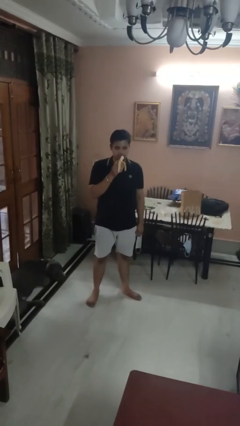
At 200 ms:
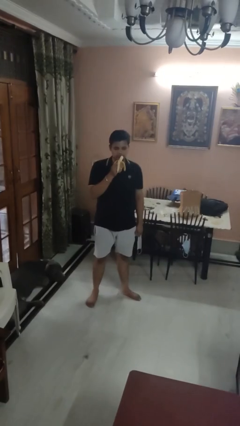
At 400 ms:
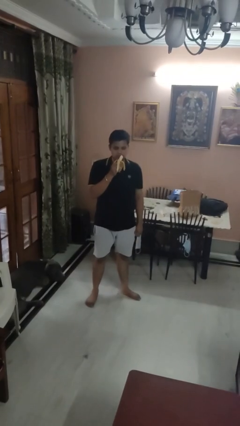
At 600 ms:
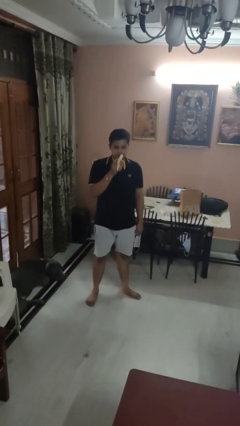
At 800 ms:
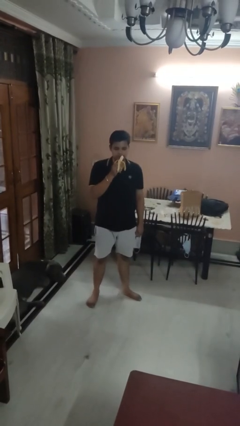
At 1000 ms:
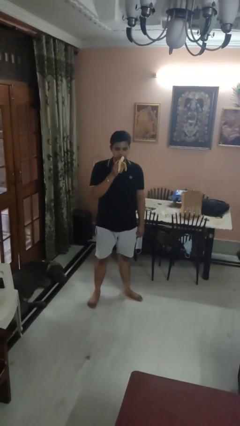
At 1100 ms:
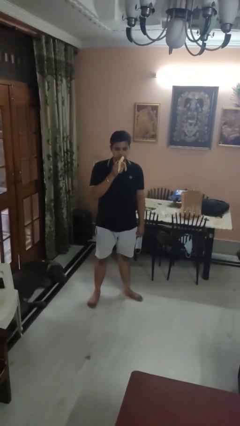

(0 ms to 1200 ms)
person eats banana

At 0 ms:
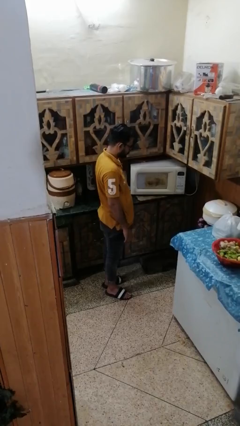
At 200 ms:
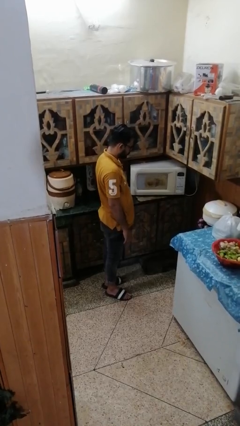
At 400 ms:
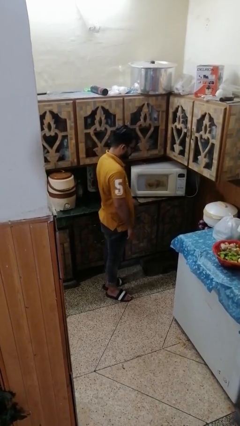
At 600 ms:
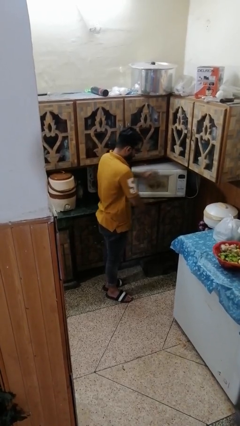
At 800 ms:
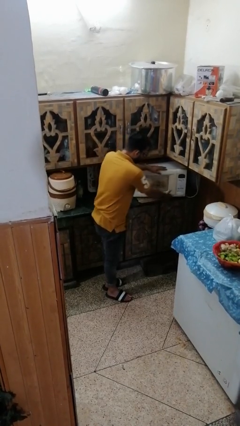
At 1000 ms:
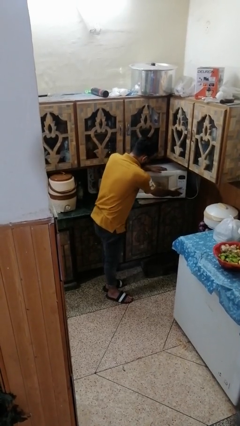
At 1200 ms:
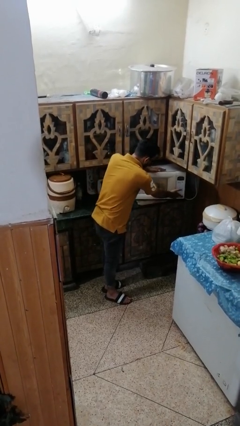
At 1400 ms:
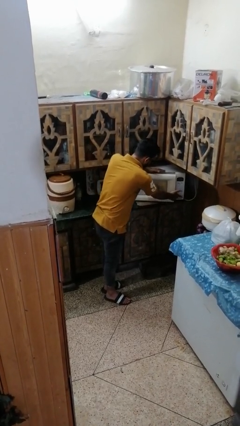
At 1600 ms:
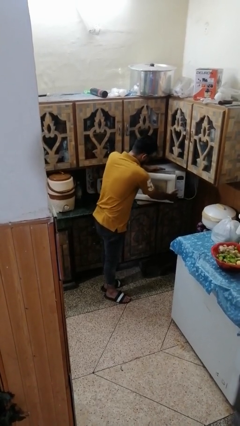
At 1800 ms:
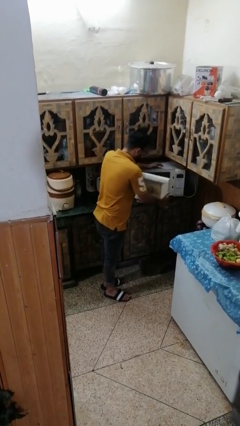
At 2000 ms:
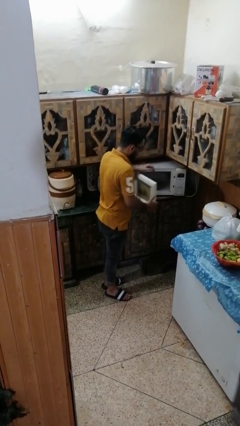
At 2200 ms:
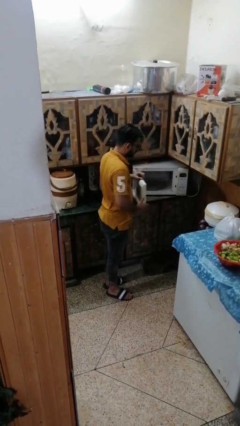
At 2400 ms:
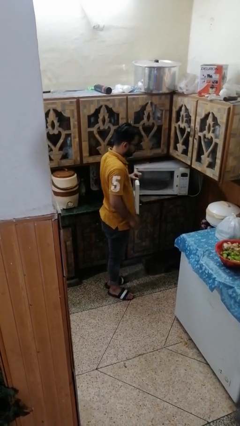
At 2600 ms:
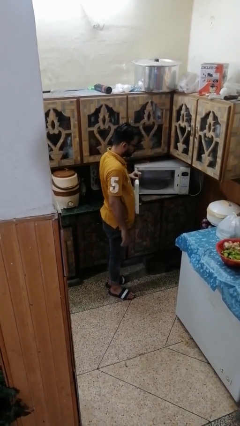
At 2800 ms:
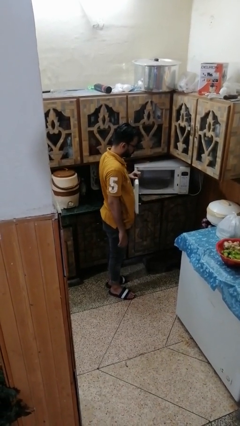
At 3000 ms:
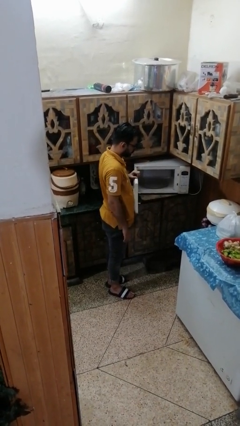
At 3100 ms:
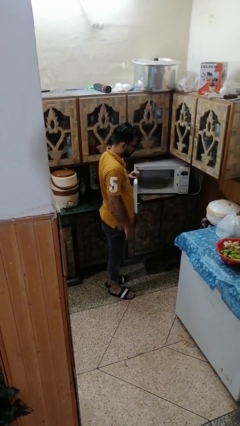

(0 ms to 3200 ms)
person opens microwave

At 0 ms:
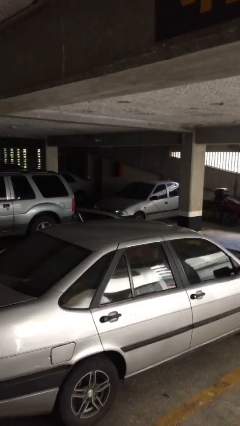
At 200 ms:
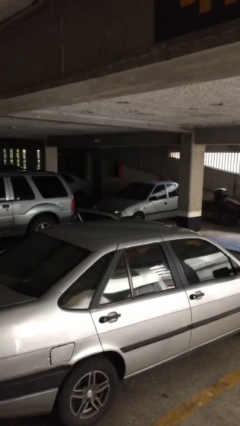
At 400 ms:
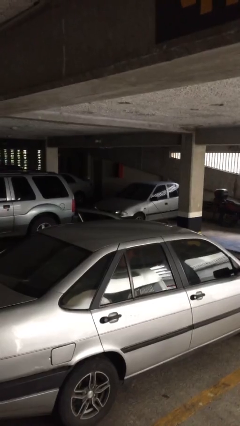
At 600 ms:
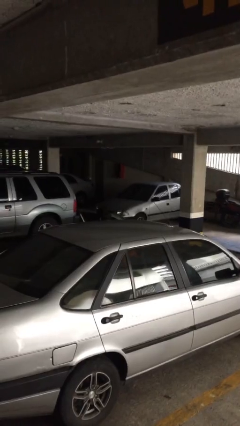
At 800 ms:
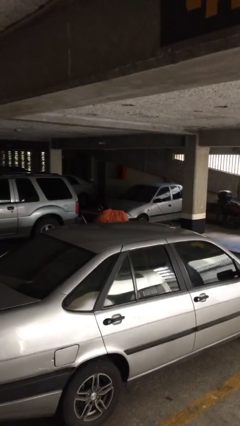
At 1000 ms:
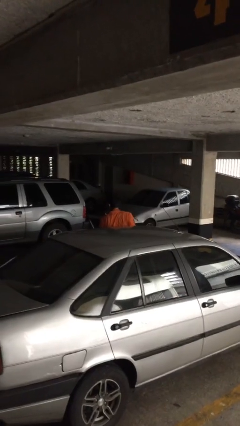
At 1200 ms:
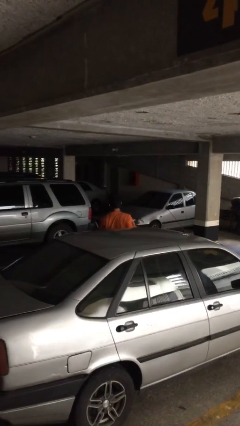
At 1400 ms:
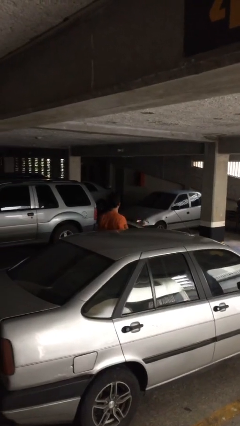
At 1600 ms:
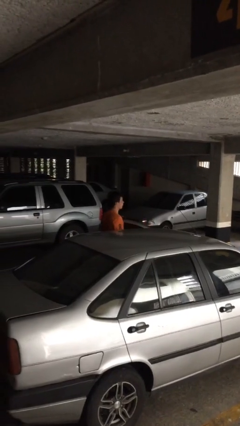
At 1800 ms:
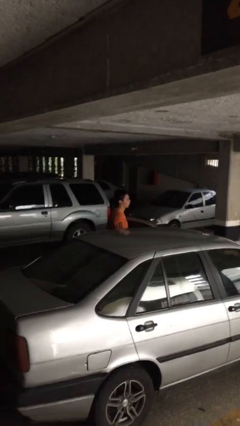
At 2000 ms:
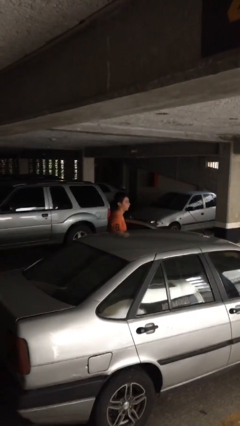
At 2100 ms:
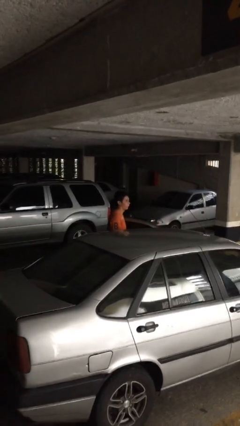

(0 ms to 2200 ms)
person exits car

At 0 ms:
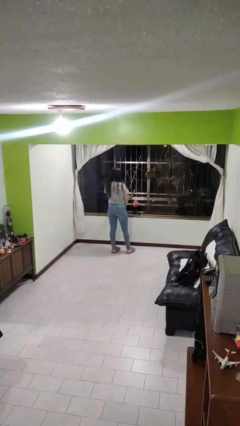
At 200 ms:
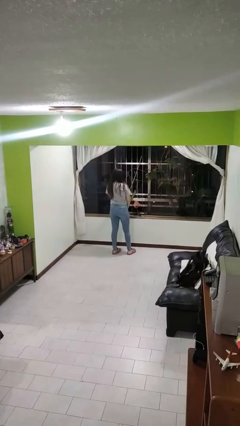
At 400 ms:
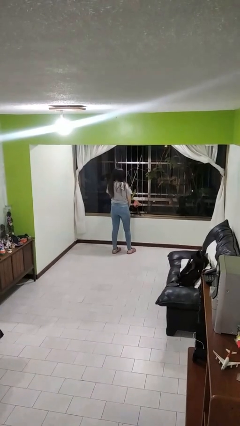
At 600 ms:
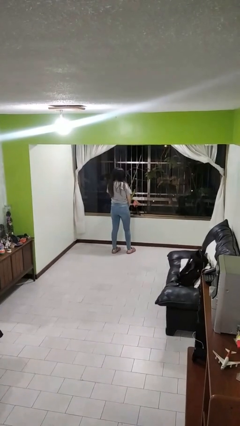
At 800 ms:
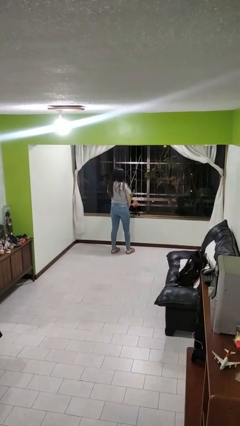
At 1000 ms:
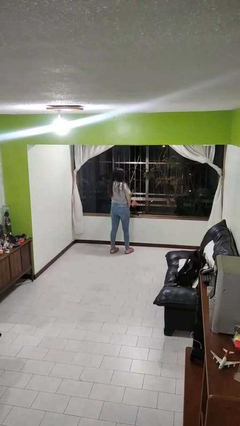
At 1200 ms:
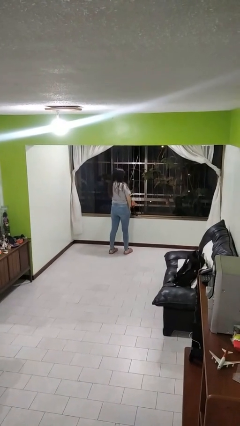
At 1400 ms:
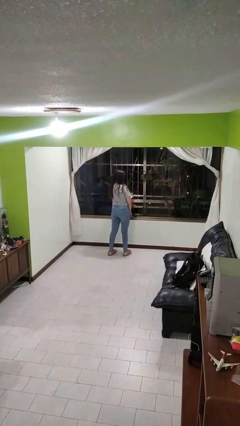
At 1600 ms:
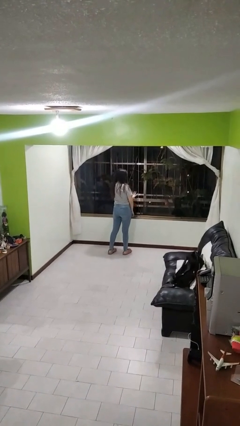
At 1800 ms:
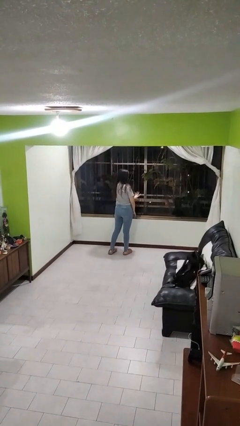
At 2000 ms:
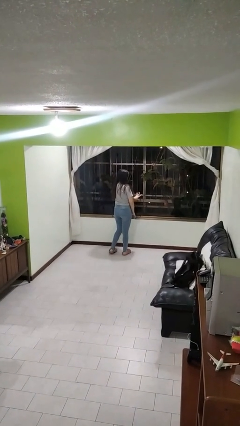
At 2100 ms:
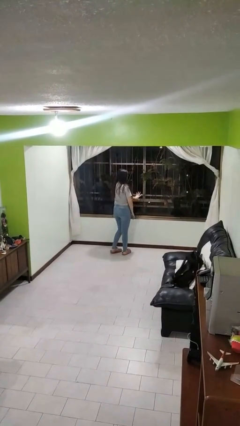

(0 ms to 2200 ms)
person closes home window

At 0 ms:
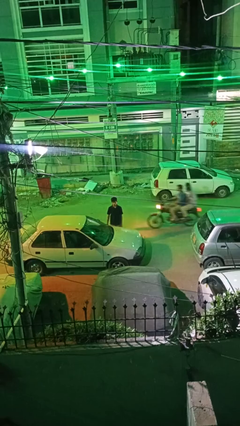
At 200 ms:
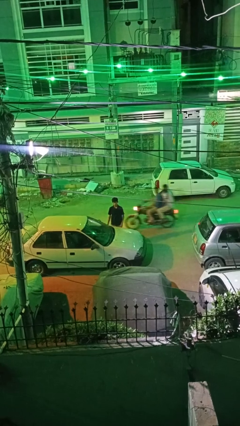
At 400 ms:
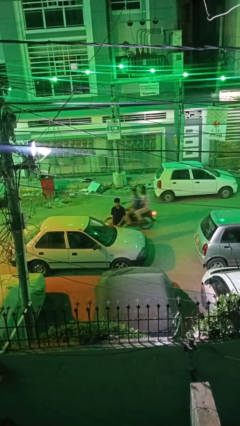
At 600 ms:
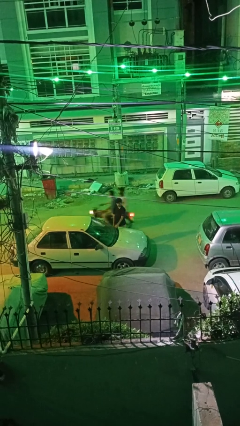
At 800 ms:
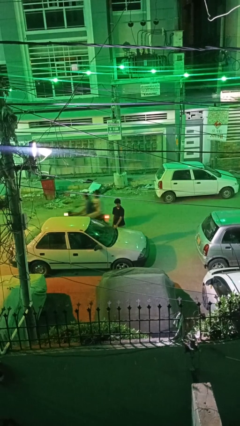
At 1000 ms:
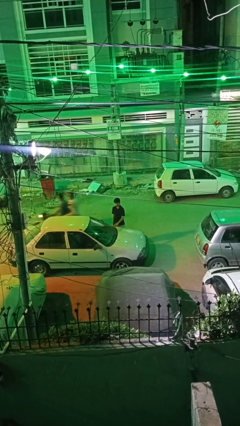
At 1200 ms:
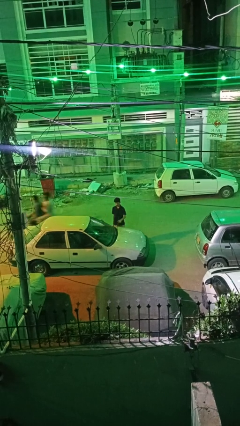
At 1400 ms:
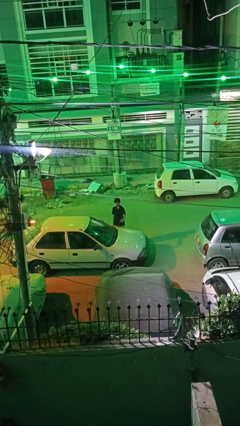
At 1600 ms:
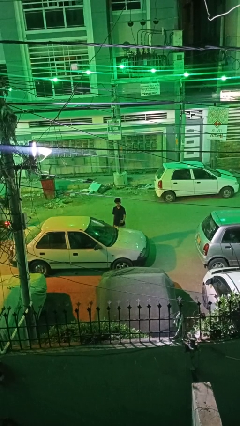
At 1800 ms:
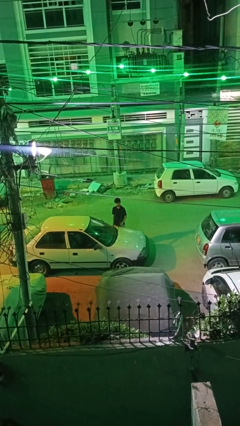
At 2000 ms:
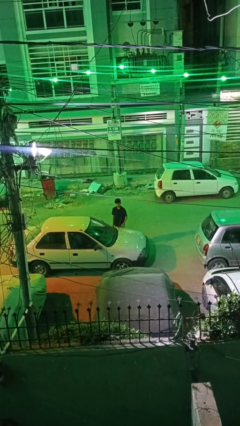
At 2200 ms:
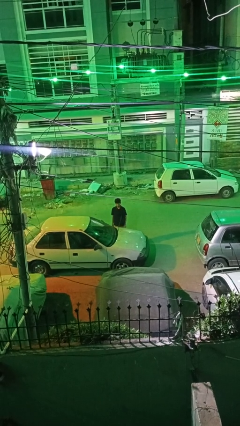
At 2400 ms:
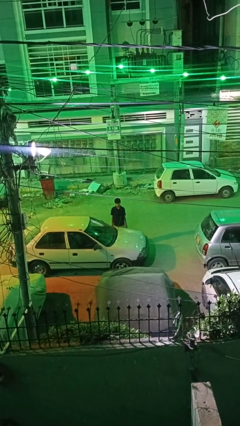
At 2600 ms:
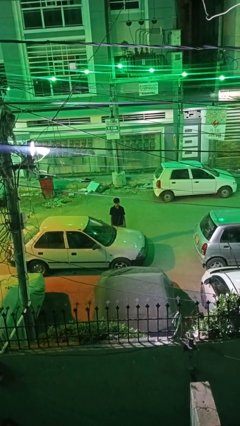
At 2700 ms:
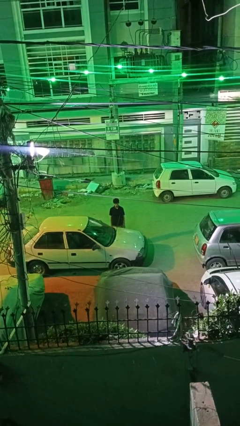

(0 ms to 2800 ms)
person flips up car wipers

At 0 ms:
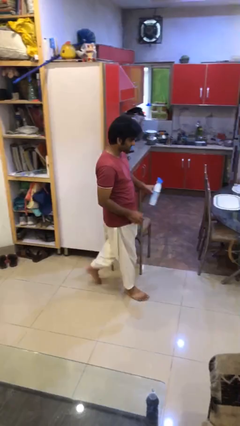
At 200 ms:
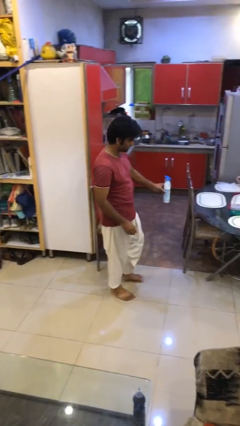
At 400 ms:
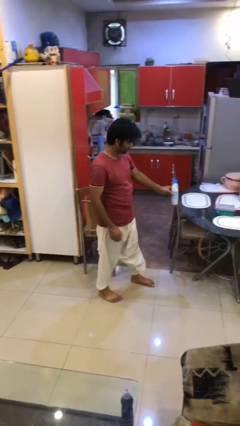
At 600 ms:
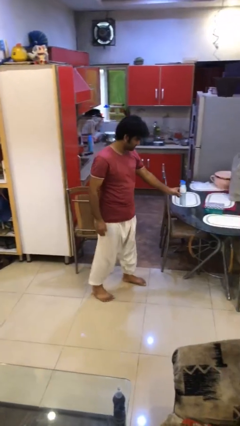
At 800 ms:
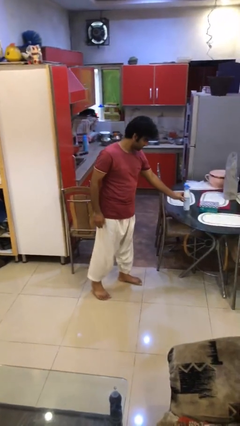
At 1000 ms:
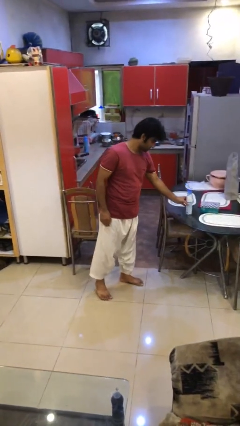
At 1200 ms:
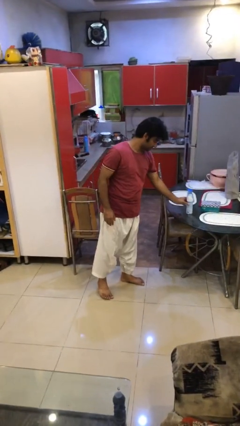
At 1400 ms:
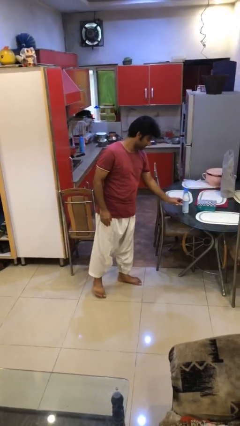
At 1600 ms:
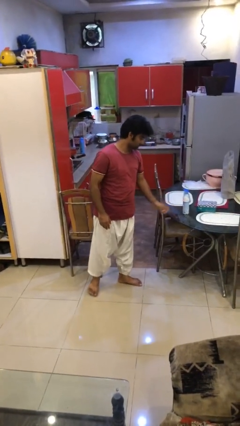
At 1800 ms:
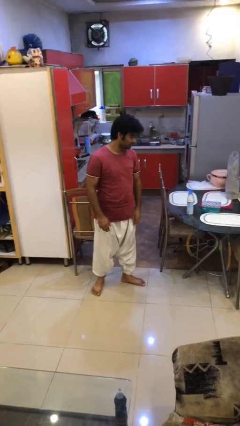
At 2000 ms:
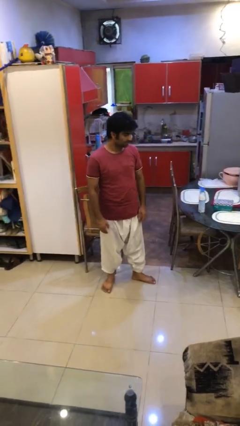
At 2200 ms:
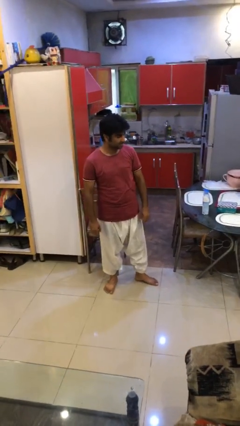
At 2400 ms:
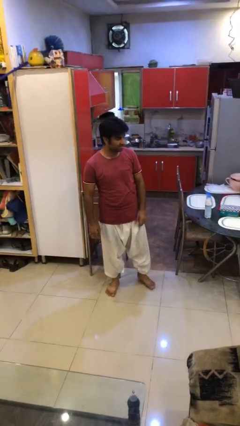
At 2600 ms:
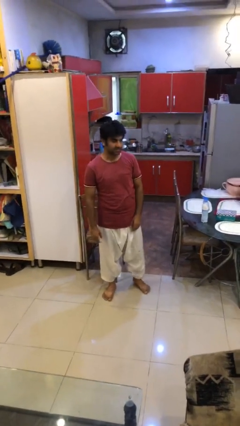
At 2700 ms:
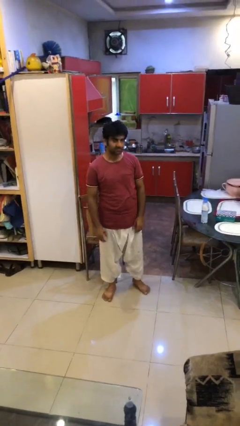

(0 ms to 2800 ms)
person puts down object on table

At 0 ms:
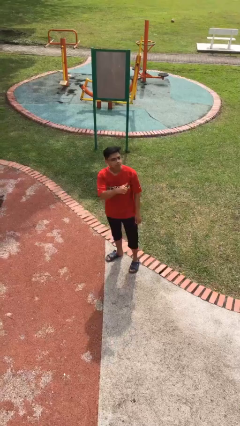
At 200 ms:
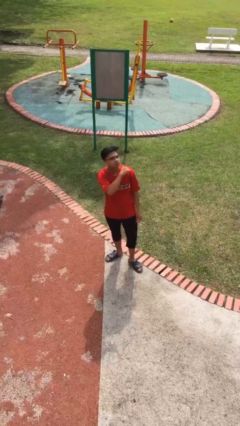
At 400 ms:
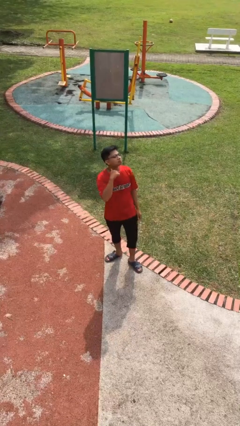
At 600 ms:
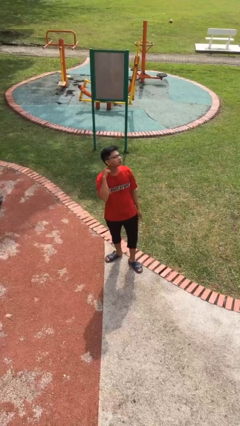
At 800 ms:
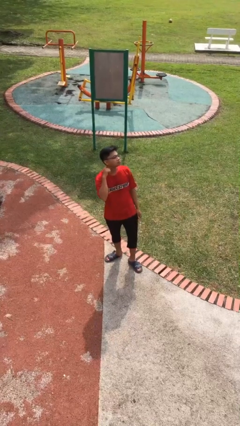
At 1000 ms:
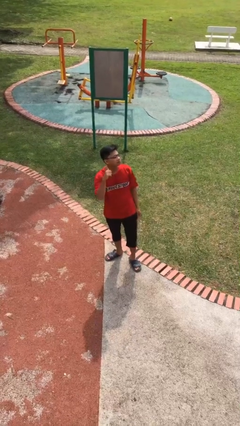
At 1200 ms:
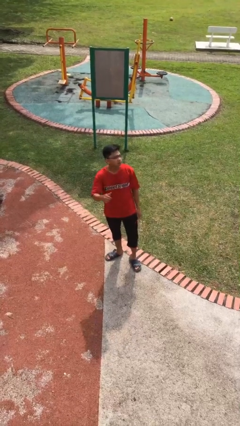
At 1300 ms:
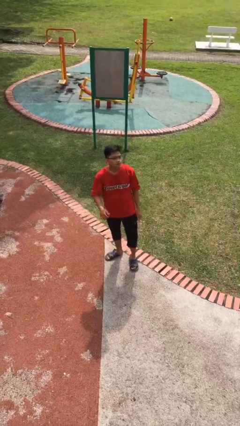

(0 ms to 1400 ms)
person gestures cut

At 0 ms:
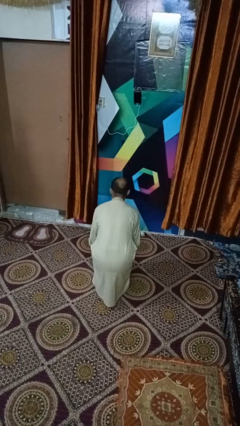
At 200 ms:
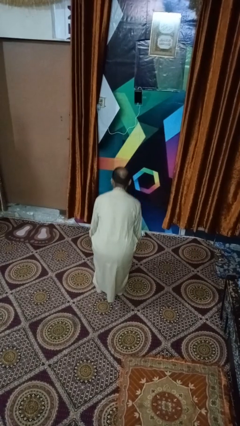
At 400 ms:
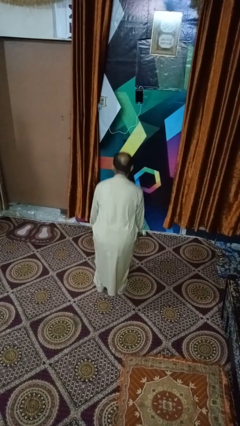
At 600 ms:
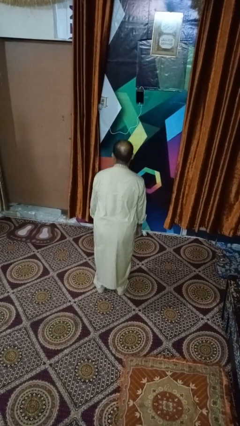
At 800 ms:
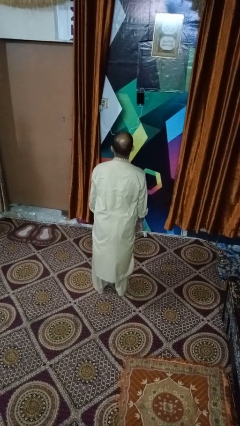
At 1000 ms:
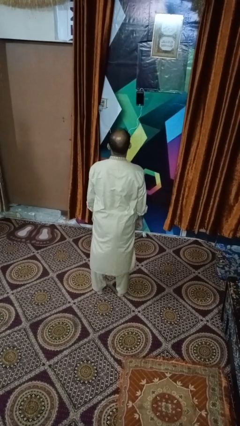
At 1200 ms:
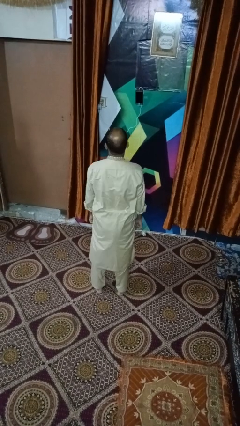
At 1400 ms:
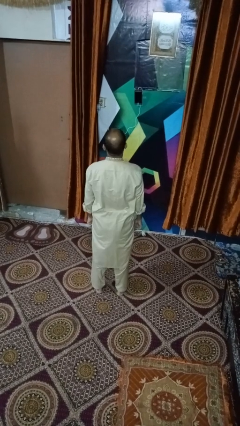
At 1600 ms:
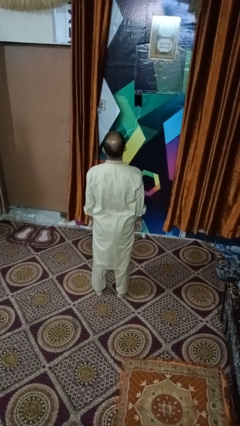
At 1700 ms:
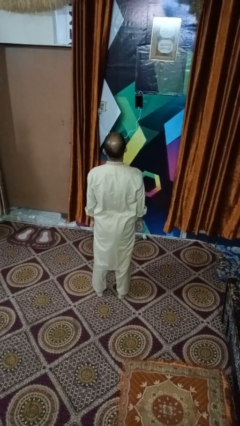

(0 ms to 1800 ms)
person stands up
